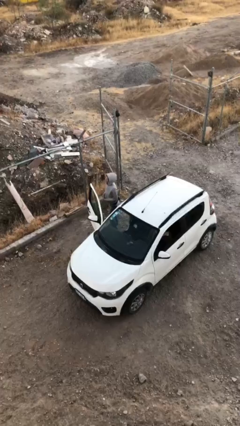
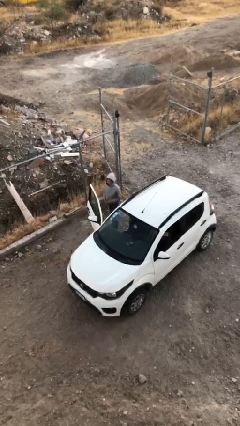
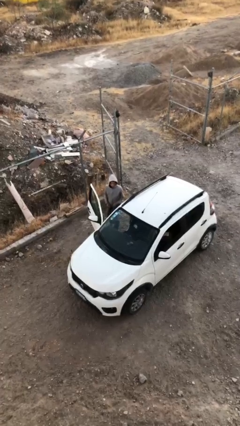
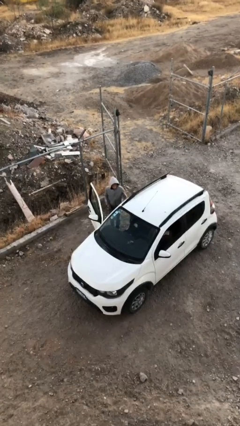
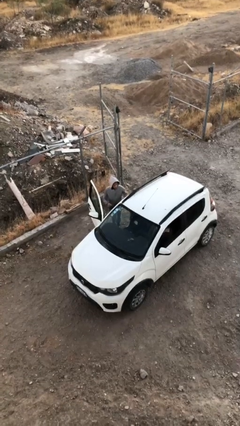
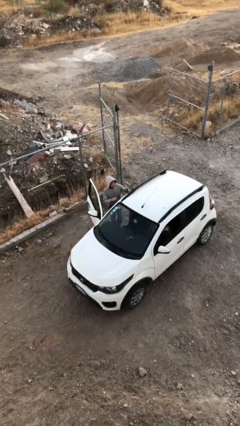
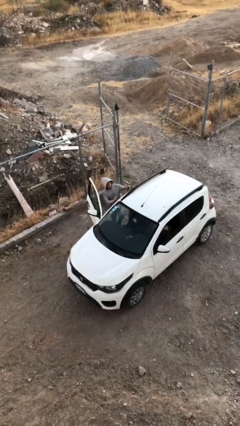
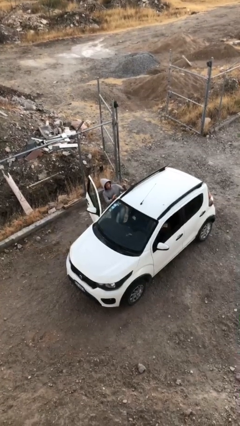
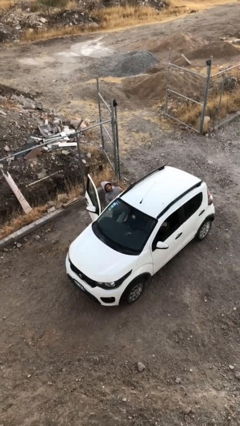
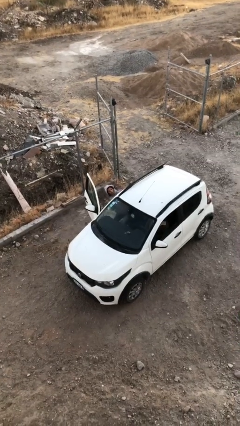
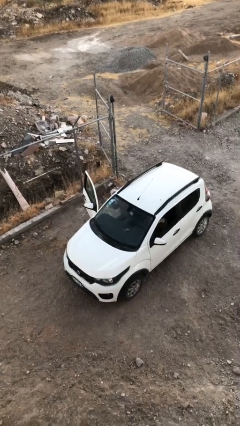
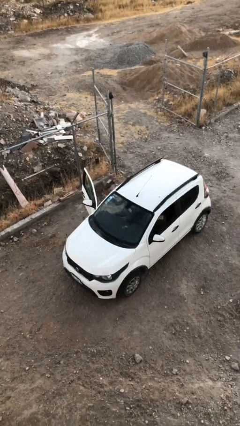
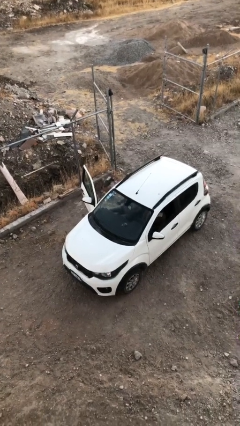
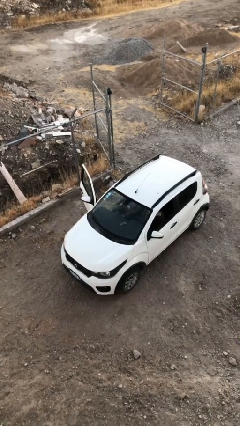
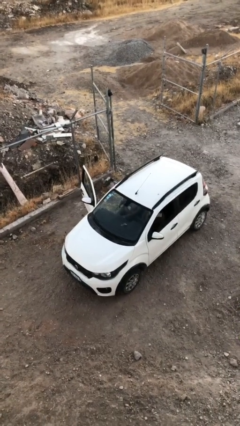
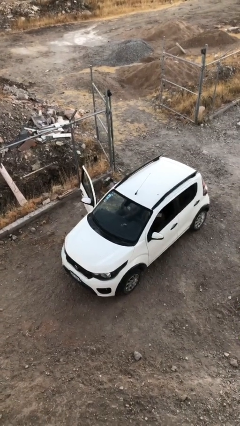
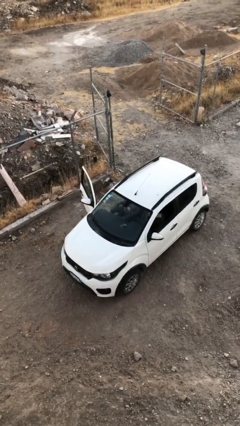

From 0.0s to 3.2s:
person enters car

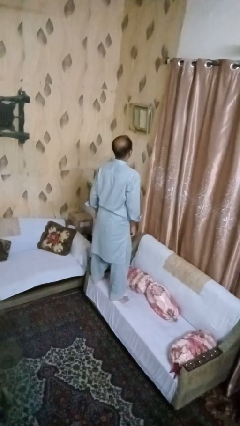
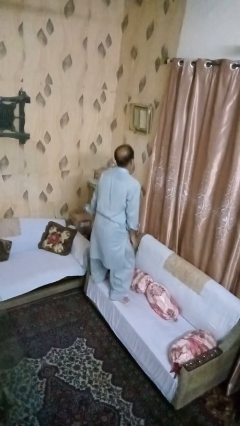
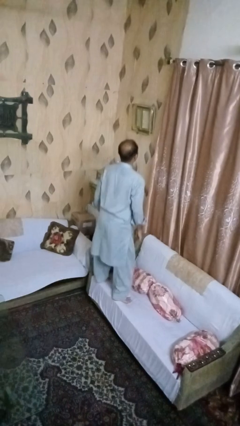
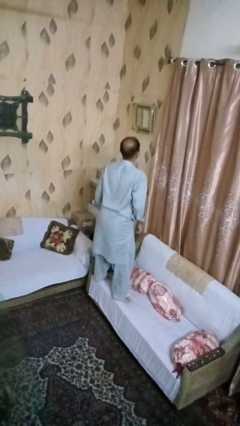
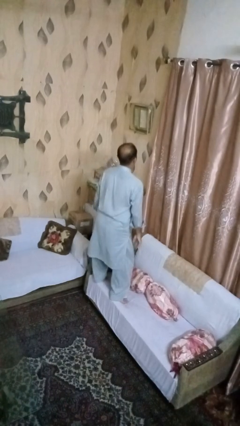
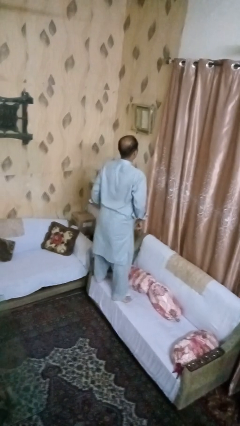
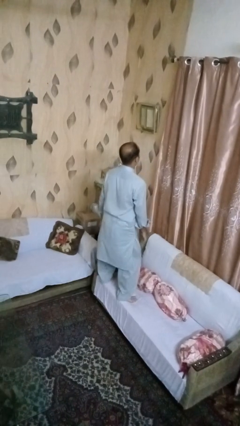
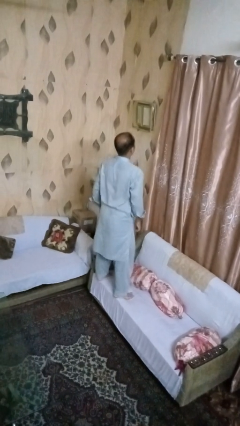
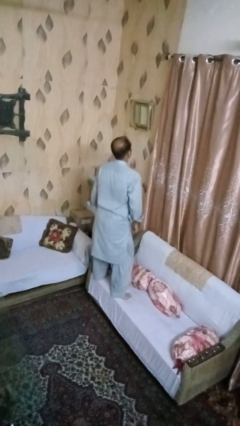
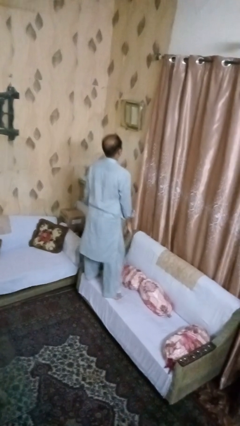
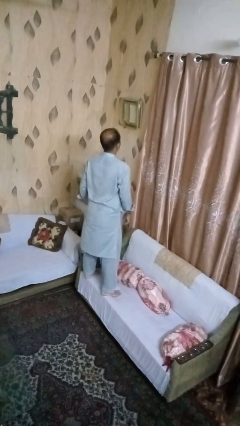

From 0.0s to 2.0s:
person jumps on couch

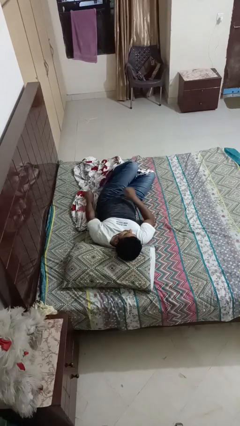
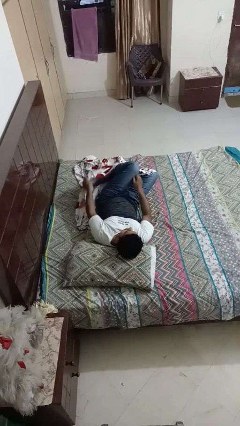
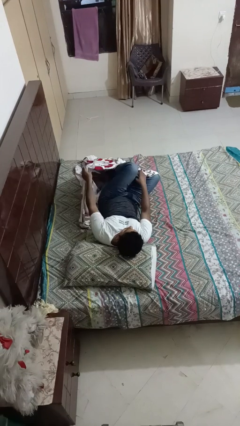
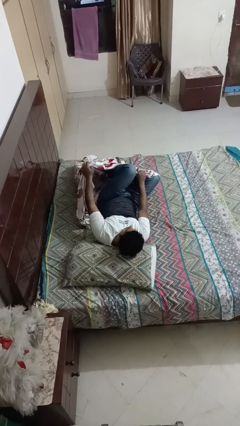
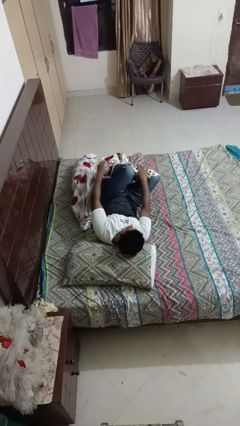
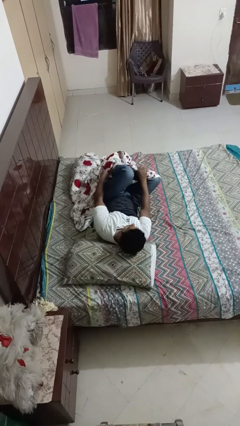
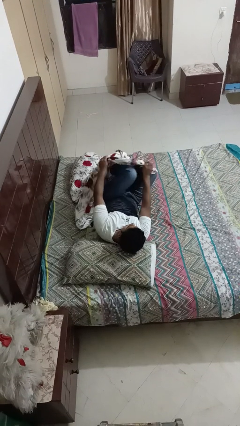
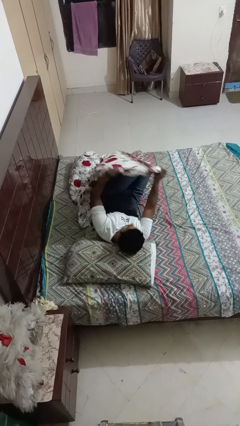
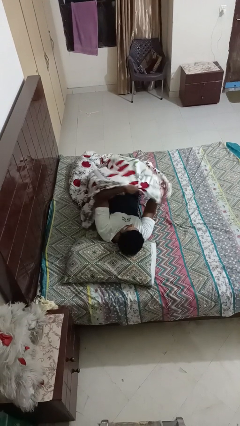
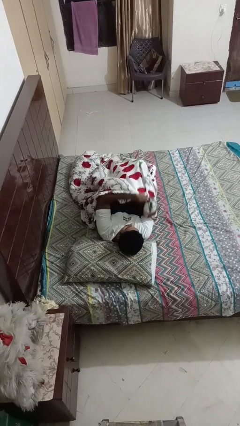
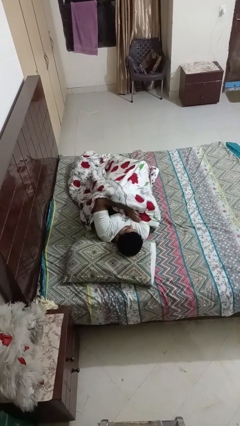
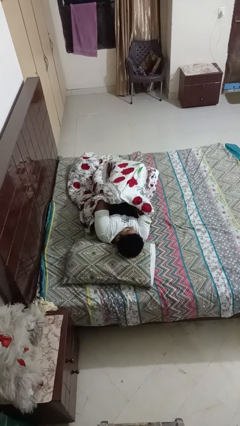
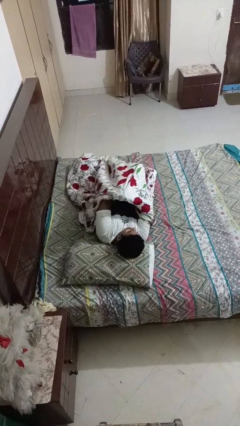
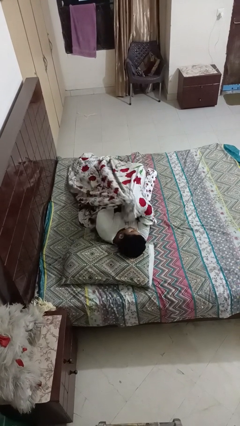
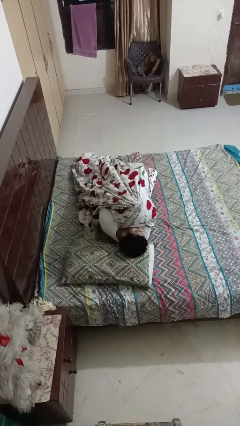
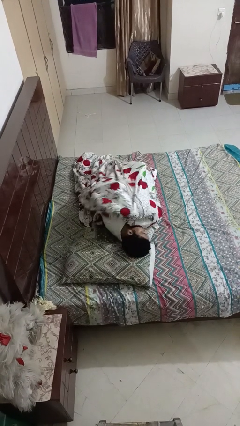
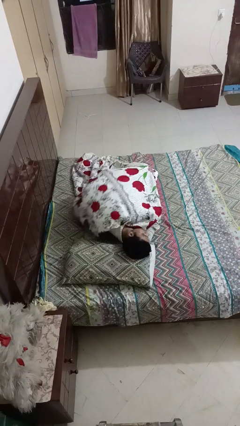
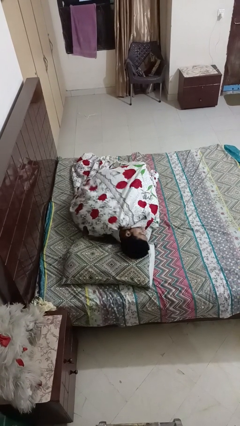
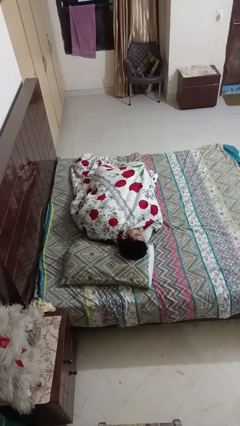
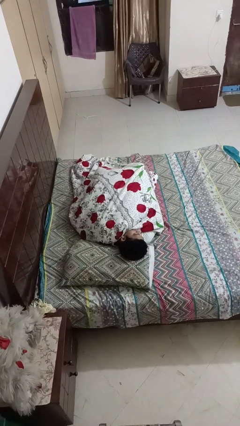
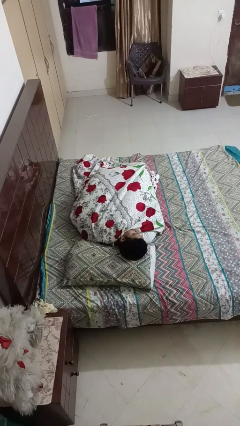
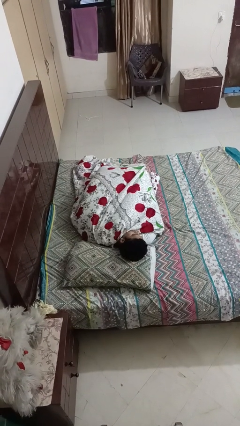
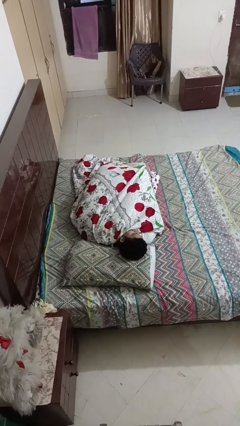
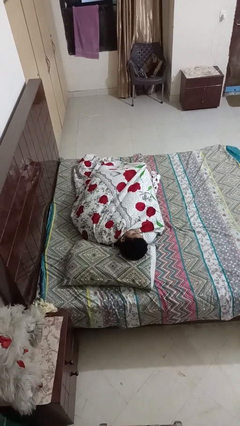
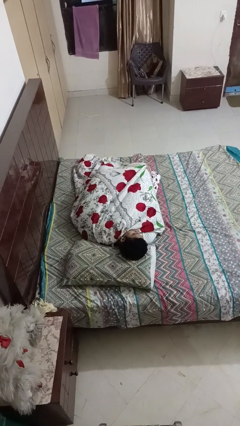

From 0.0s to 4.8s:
person covers with bedsheets

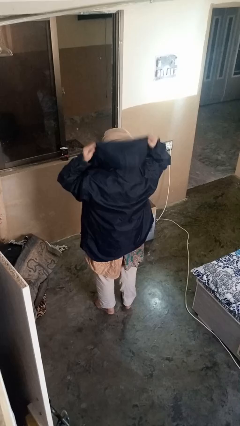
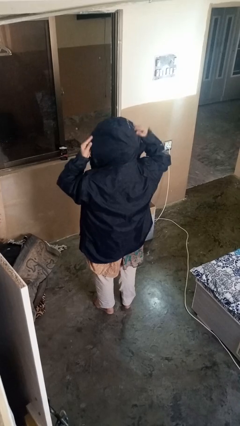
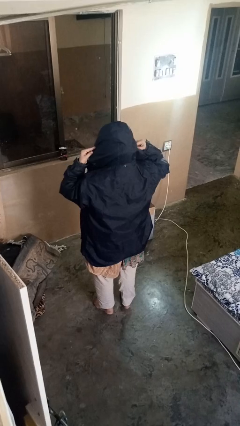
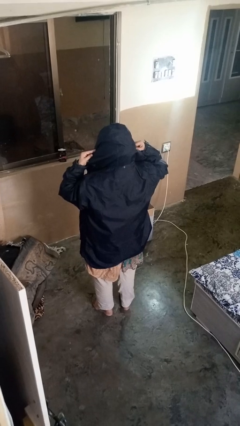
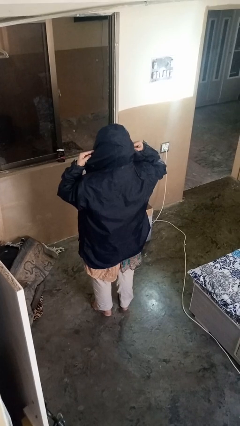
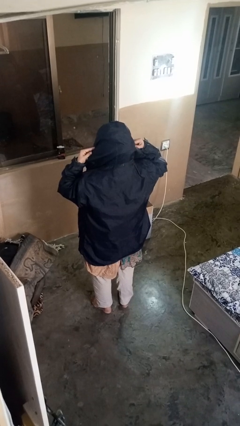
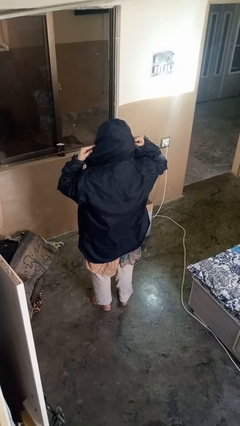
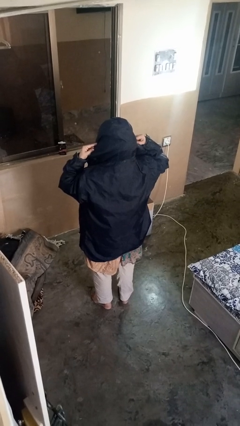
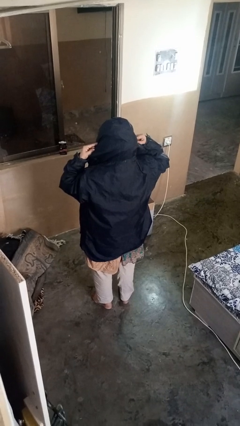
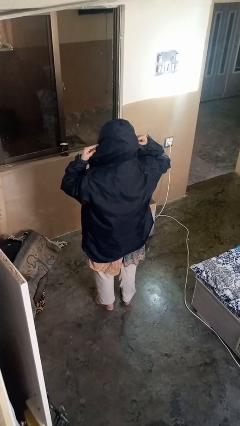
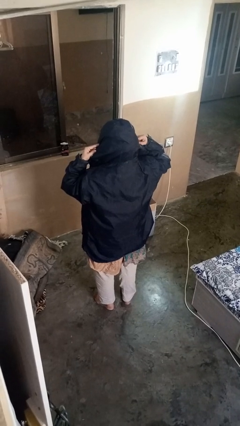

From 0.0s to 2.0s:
person puts on hat

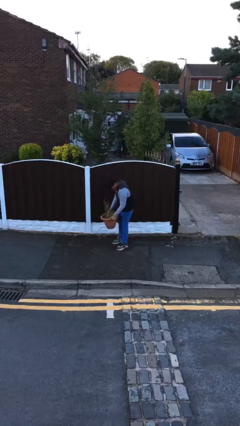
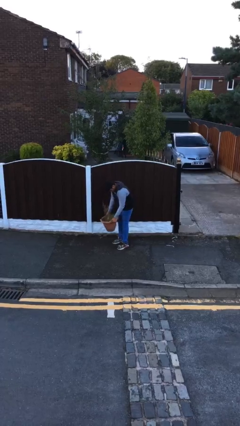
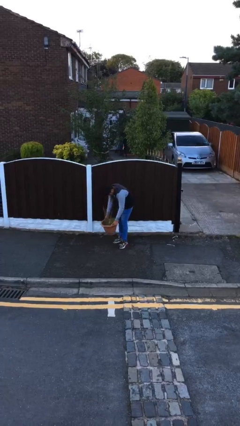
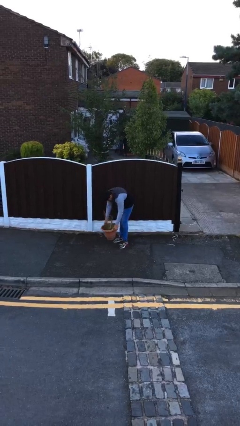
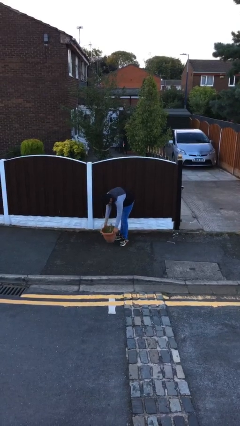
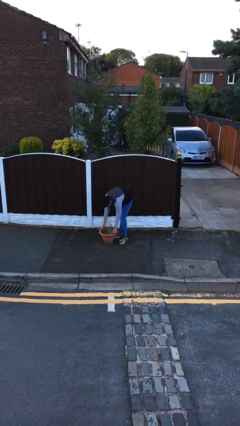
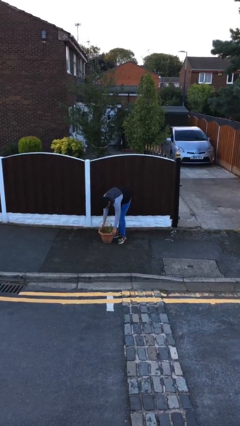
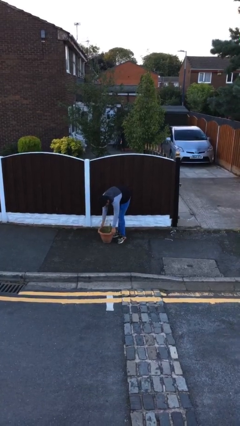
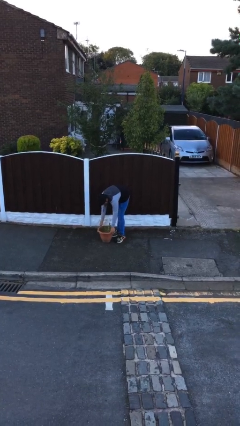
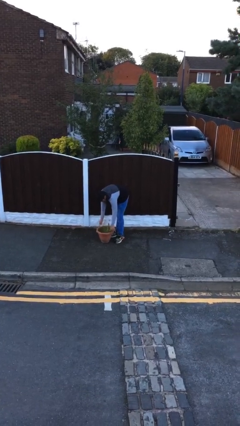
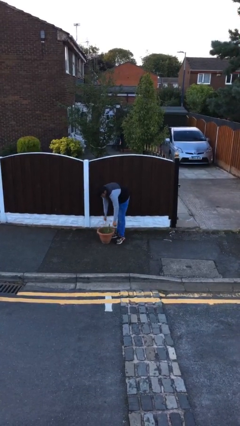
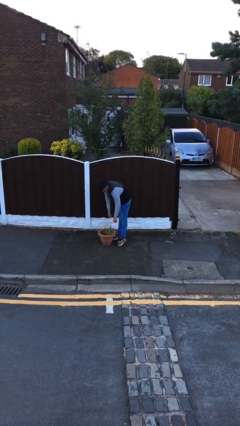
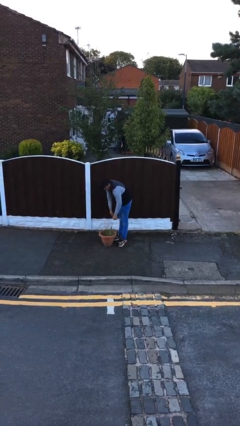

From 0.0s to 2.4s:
person puts down object on floor

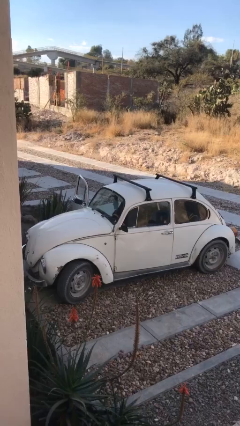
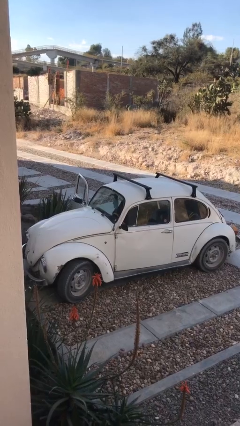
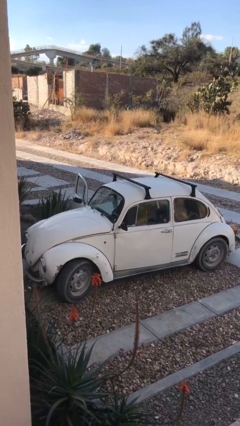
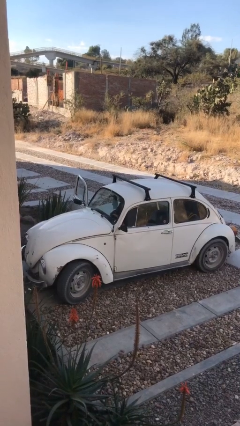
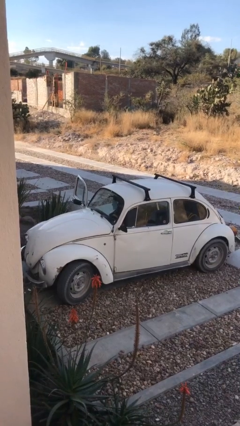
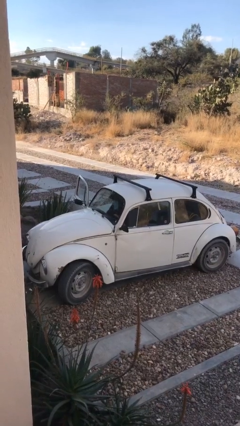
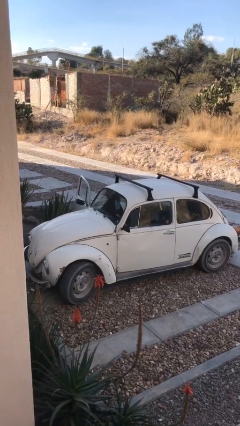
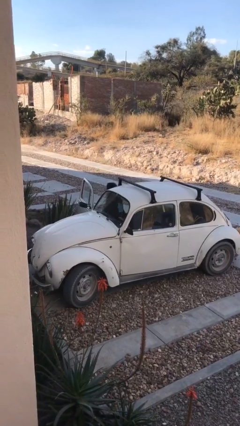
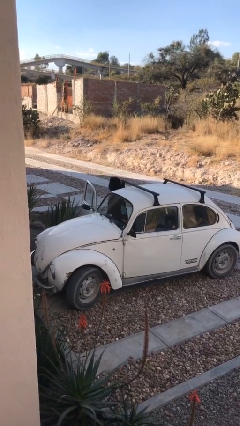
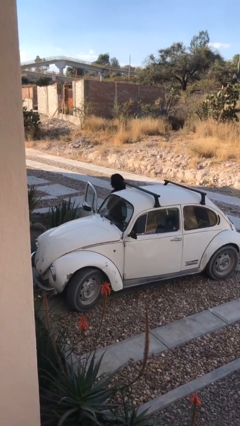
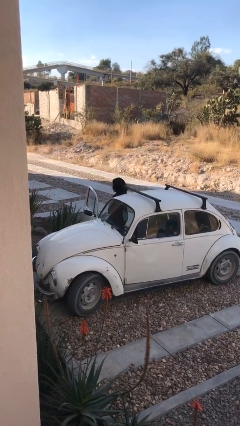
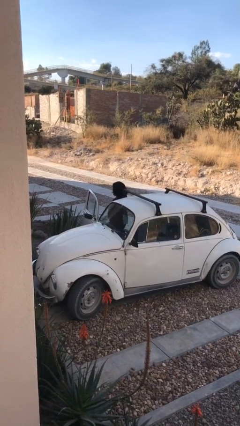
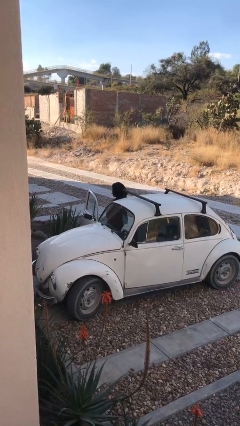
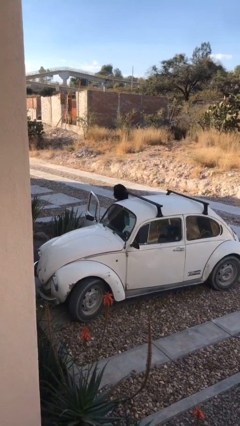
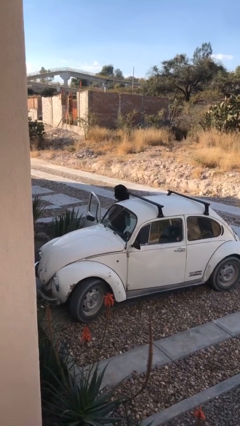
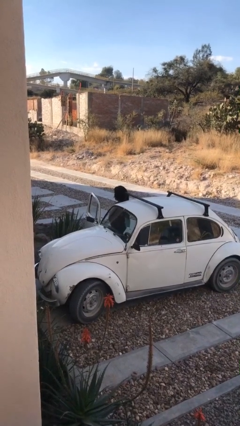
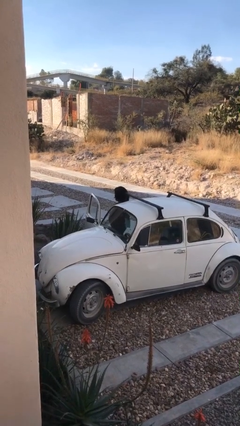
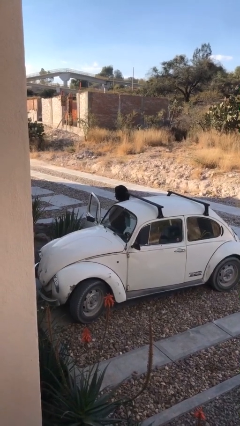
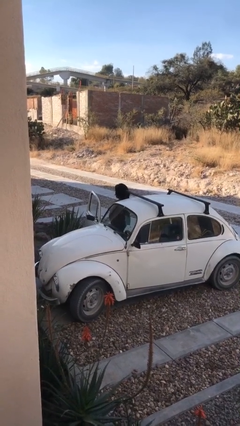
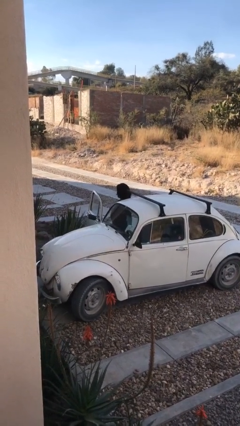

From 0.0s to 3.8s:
person exits car
